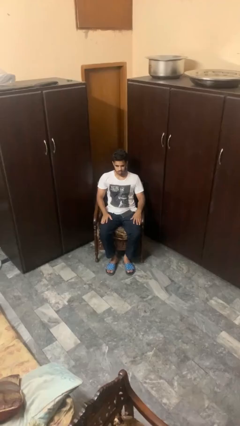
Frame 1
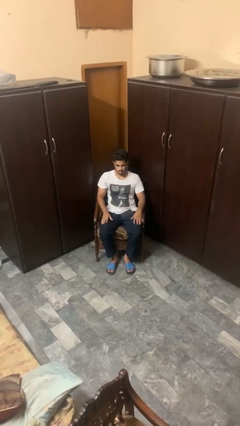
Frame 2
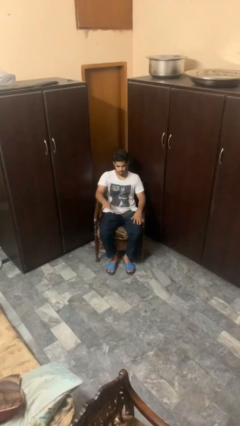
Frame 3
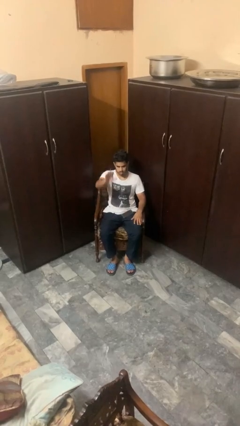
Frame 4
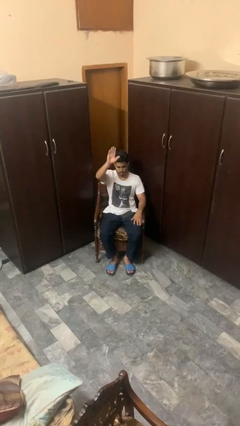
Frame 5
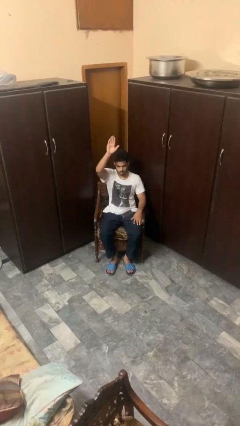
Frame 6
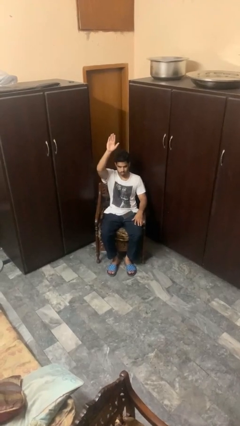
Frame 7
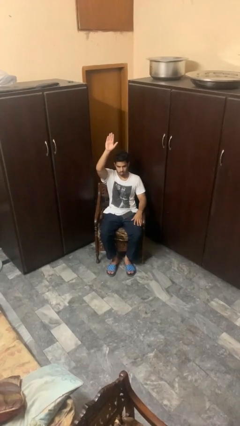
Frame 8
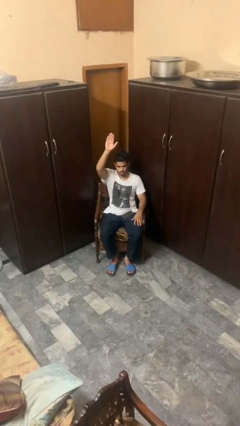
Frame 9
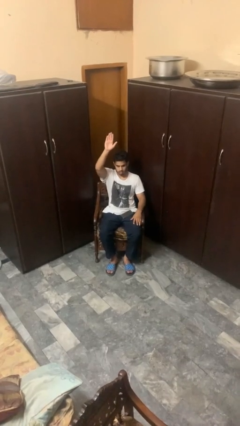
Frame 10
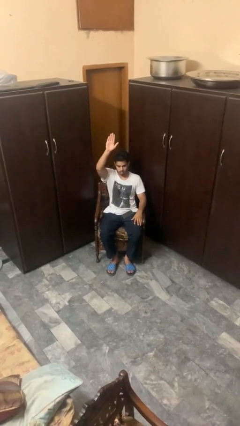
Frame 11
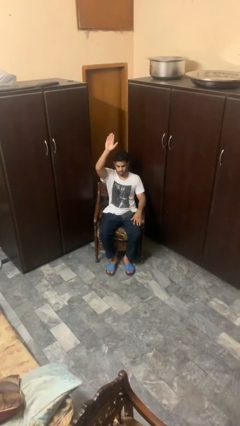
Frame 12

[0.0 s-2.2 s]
person gestures raise hand

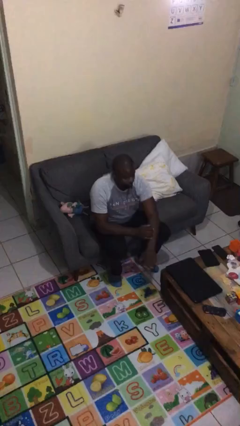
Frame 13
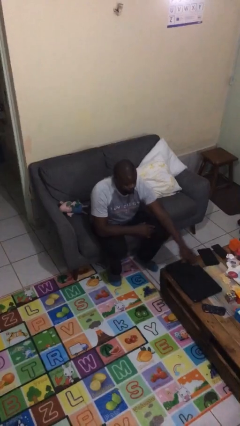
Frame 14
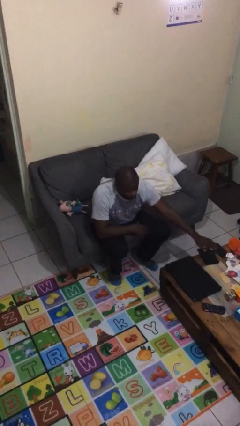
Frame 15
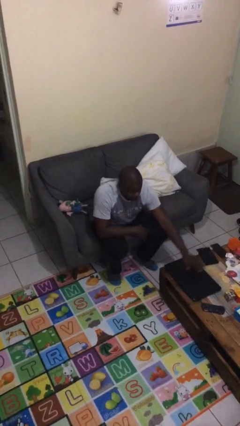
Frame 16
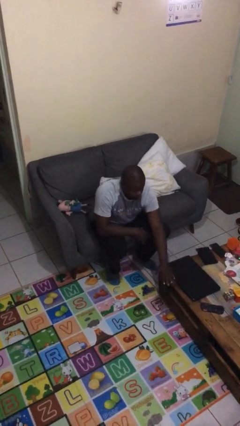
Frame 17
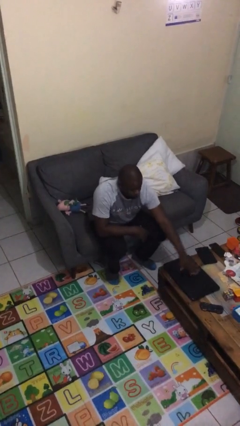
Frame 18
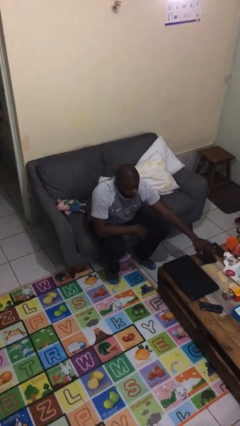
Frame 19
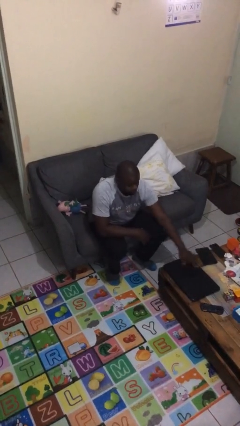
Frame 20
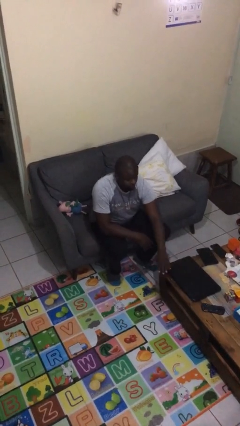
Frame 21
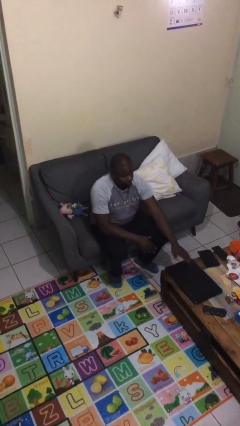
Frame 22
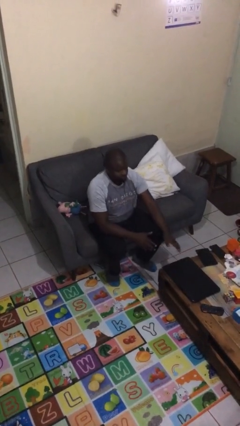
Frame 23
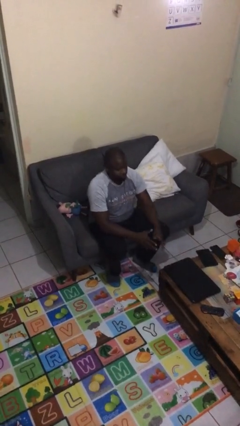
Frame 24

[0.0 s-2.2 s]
person waves hand over object

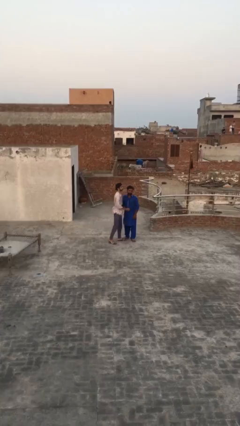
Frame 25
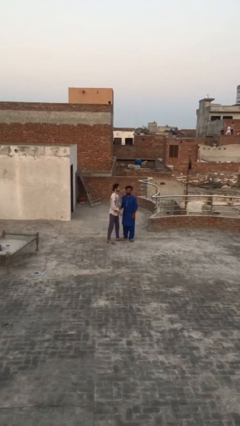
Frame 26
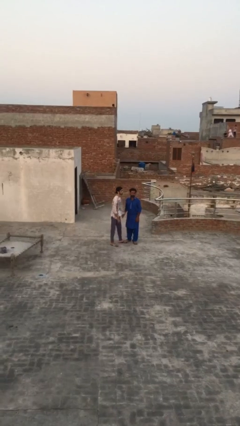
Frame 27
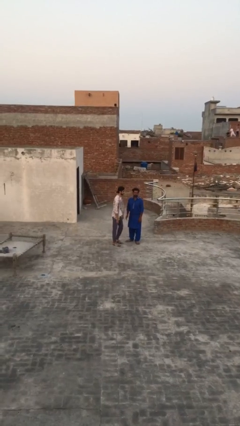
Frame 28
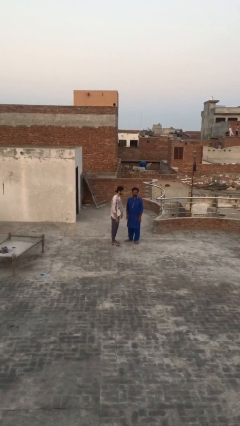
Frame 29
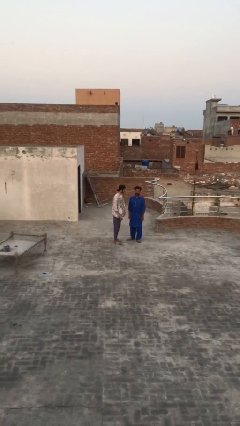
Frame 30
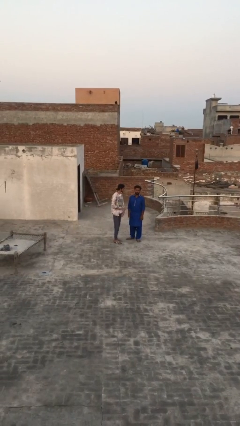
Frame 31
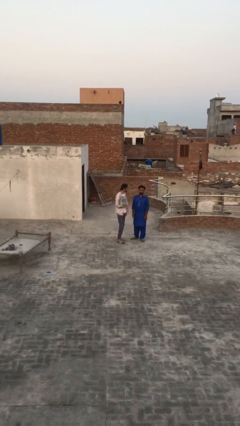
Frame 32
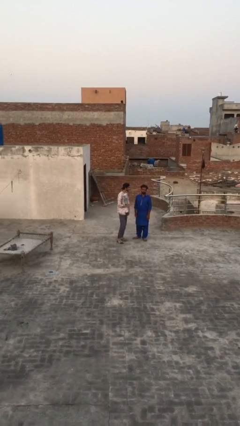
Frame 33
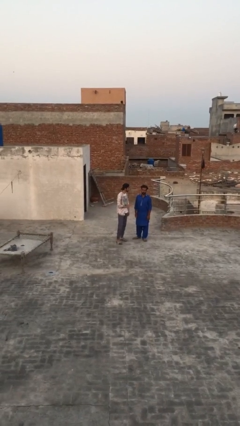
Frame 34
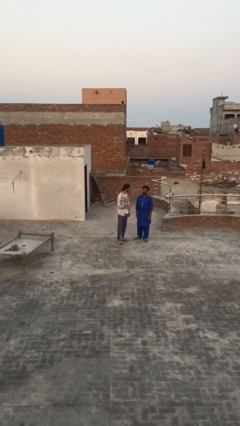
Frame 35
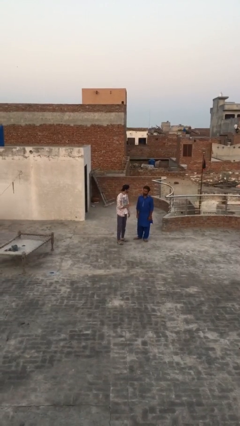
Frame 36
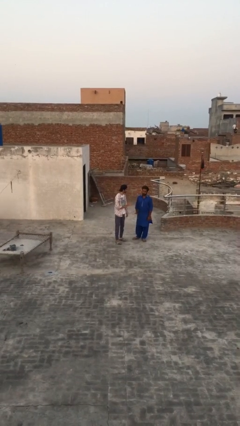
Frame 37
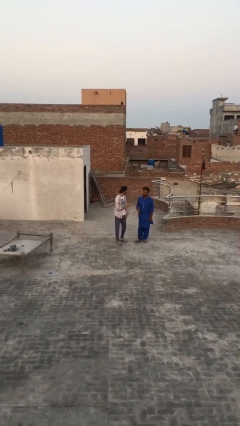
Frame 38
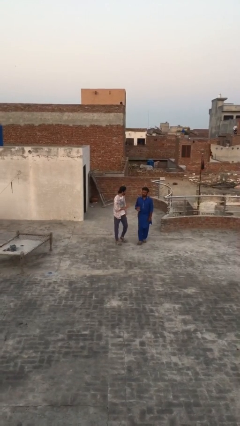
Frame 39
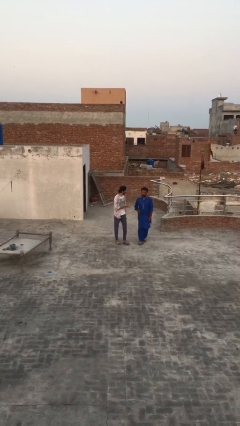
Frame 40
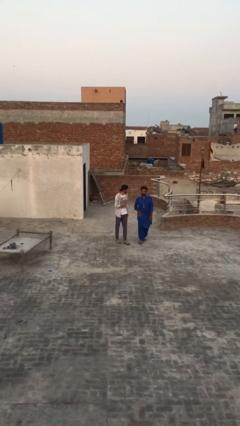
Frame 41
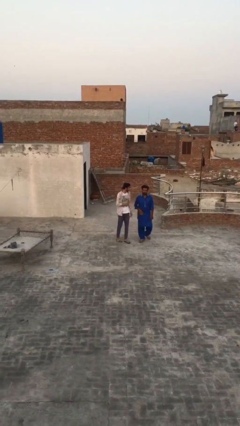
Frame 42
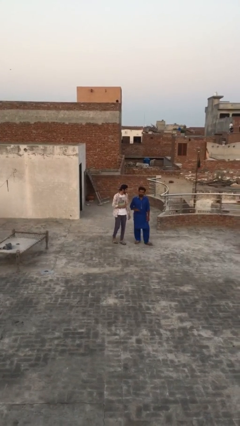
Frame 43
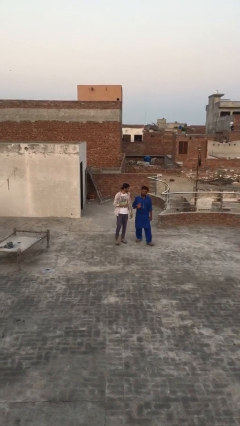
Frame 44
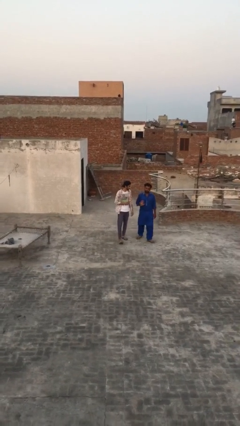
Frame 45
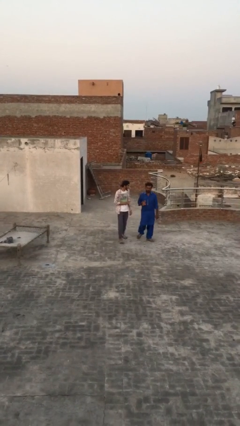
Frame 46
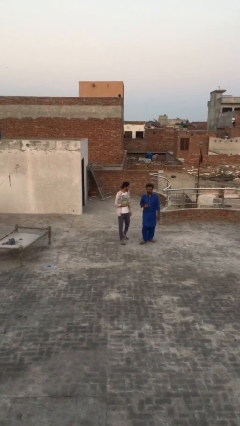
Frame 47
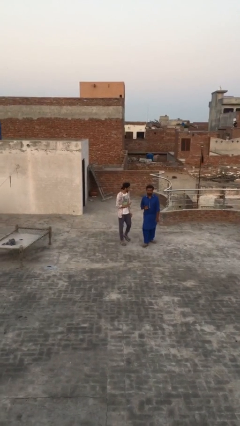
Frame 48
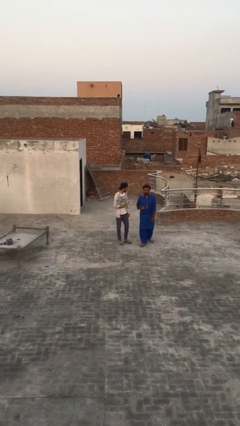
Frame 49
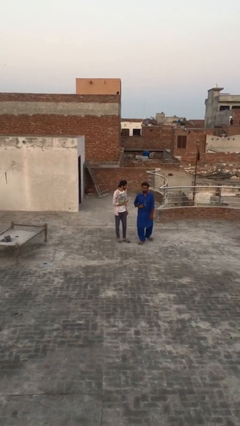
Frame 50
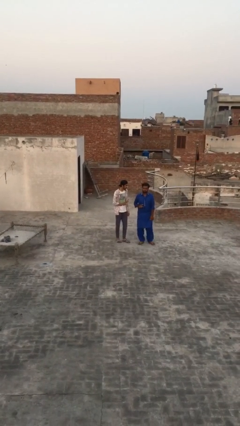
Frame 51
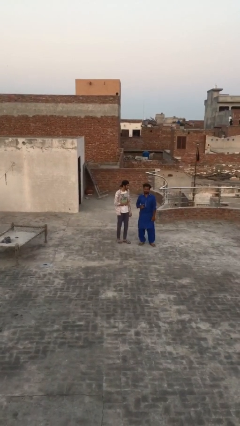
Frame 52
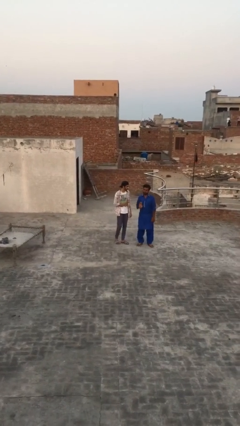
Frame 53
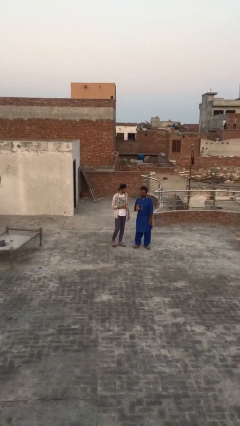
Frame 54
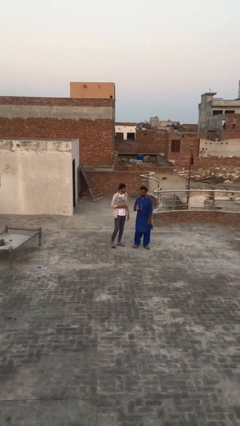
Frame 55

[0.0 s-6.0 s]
person talks to person

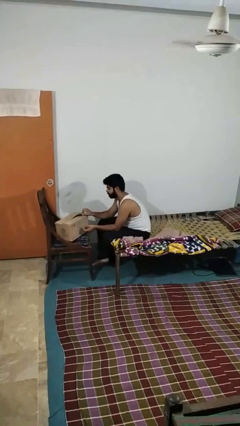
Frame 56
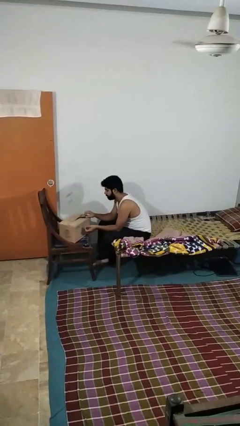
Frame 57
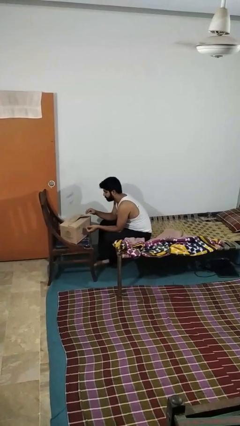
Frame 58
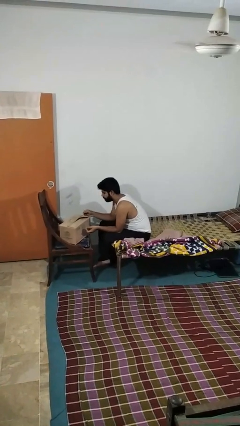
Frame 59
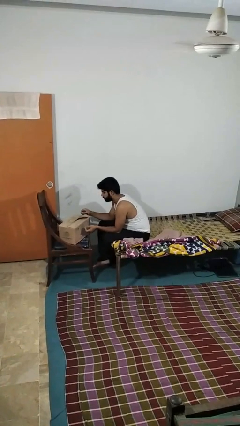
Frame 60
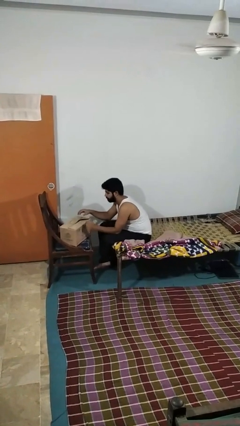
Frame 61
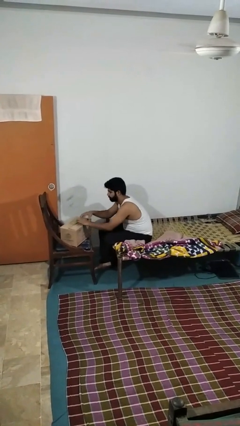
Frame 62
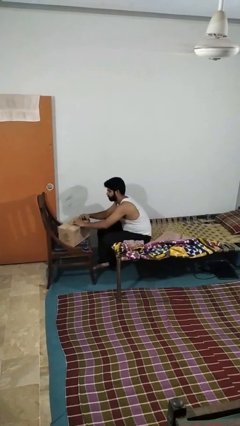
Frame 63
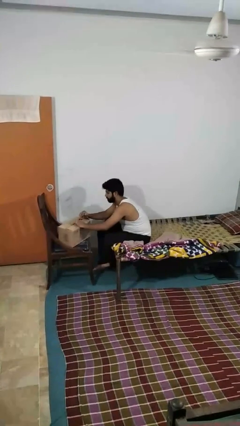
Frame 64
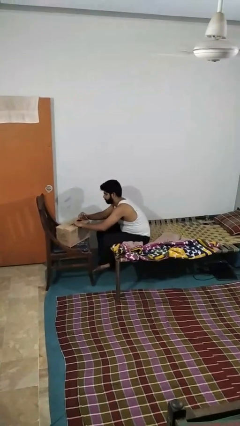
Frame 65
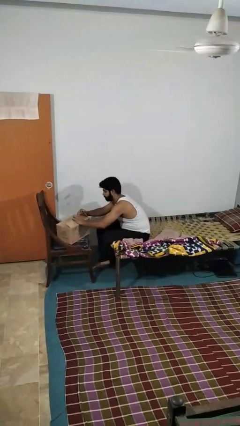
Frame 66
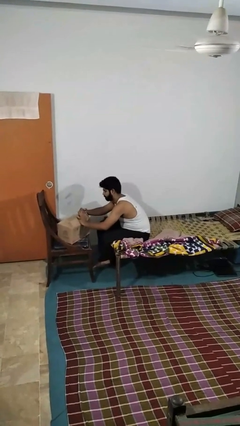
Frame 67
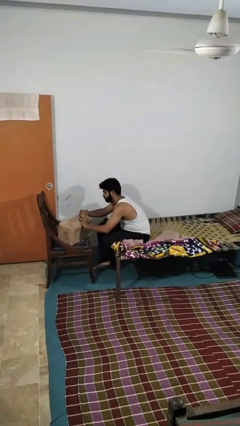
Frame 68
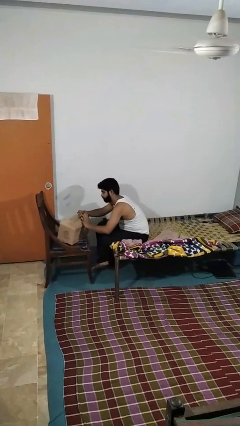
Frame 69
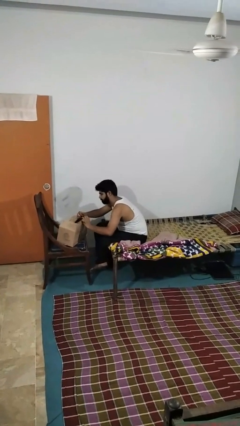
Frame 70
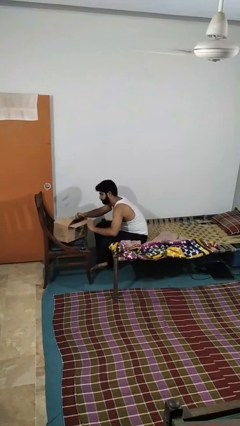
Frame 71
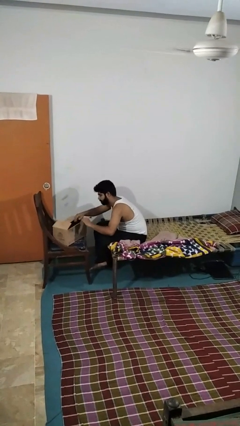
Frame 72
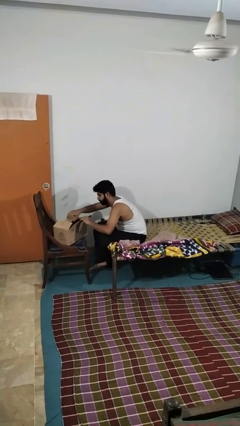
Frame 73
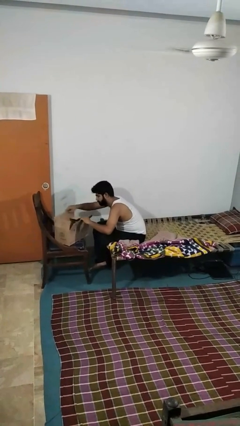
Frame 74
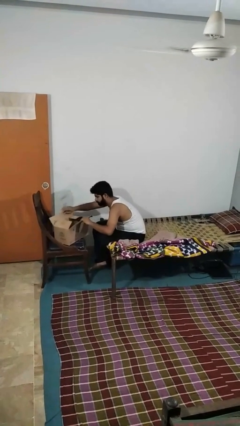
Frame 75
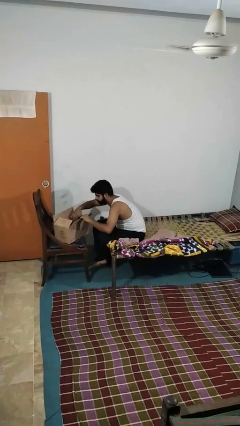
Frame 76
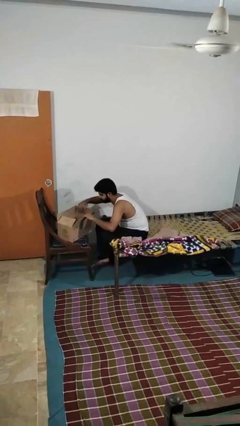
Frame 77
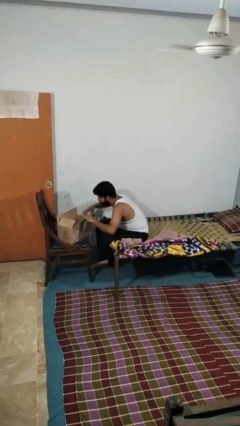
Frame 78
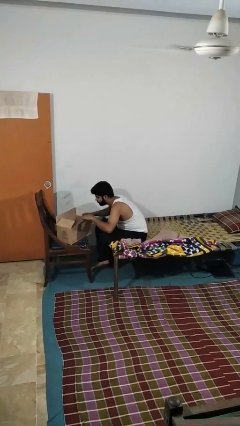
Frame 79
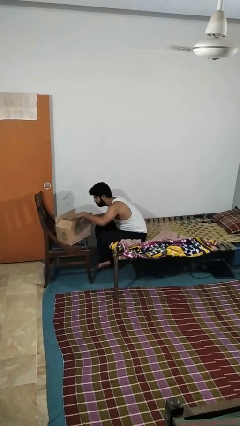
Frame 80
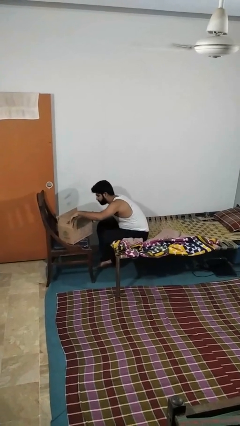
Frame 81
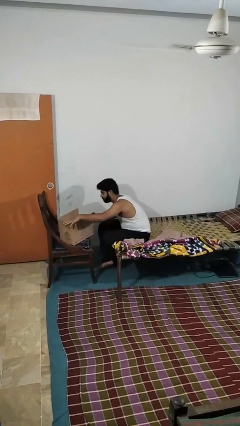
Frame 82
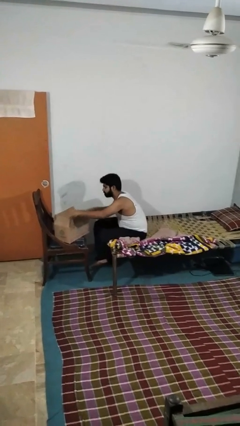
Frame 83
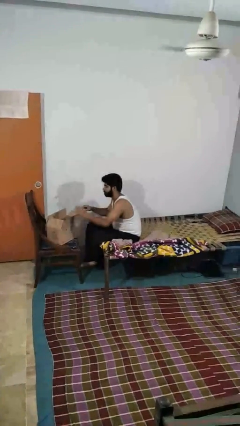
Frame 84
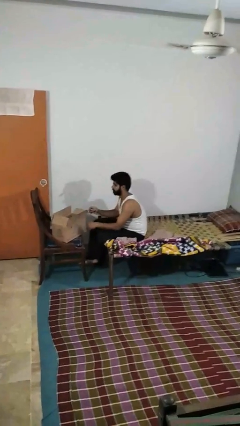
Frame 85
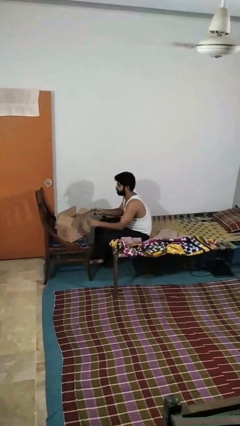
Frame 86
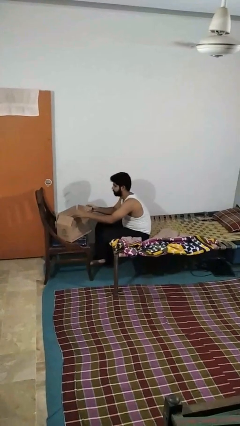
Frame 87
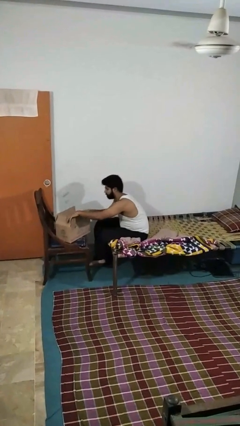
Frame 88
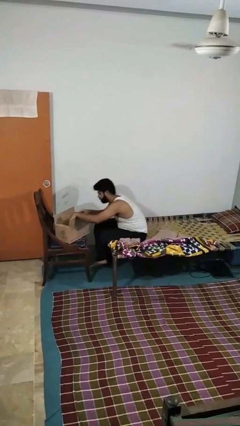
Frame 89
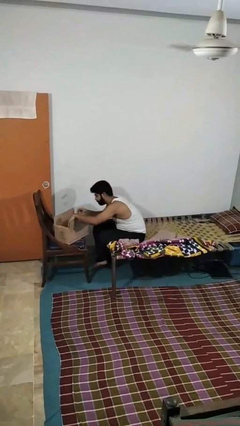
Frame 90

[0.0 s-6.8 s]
person opens box

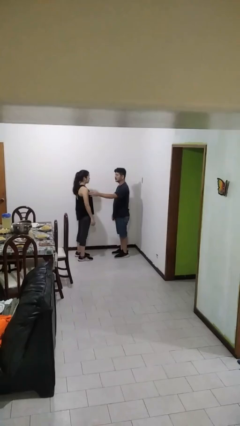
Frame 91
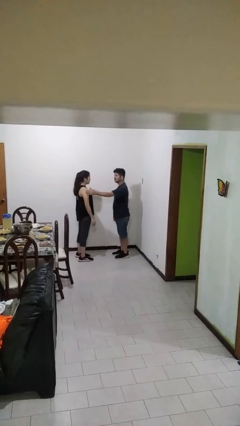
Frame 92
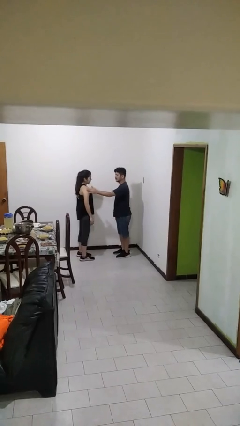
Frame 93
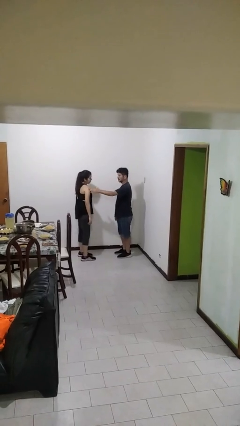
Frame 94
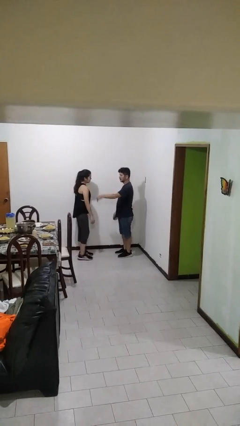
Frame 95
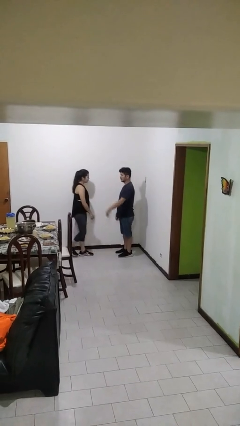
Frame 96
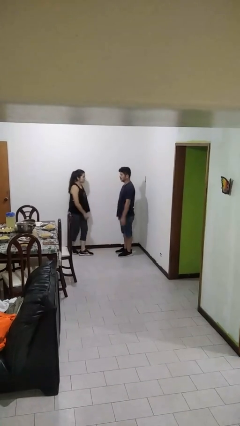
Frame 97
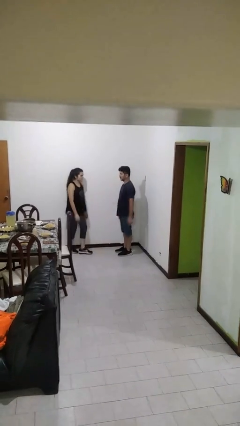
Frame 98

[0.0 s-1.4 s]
person shoves person
